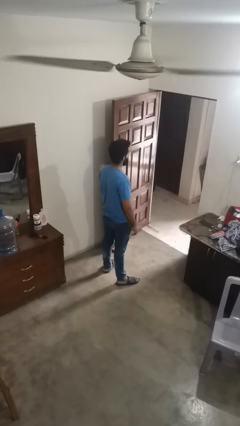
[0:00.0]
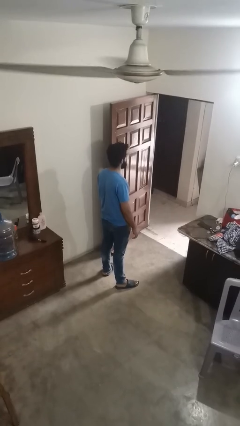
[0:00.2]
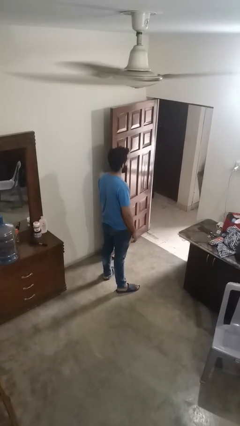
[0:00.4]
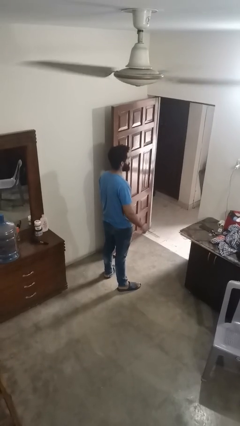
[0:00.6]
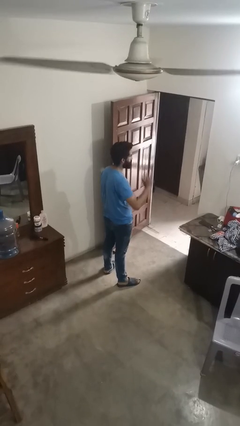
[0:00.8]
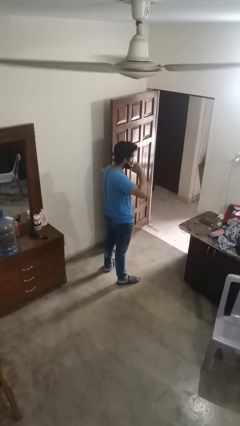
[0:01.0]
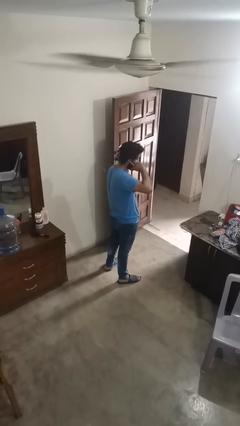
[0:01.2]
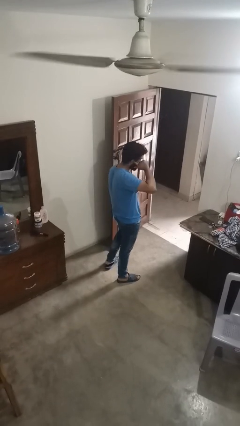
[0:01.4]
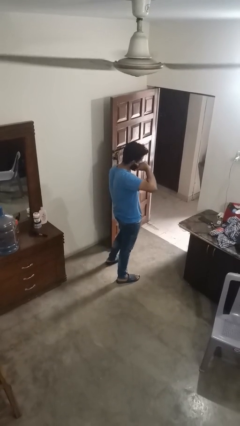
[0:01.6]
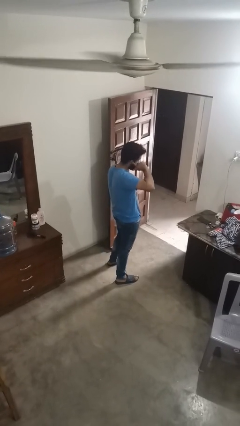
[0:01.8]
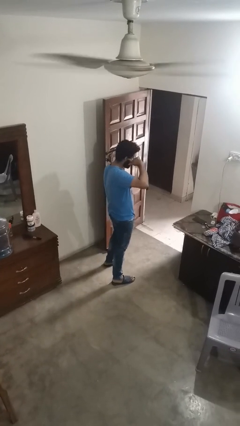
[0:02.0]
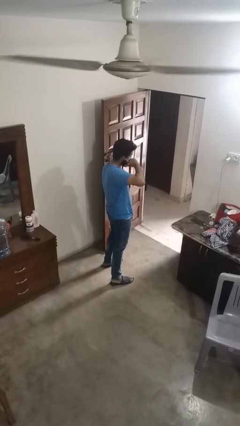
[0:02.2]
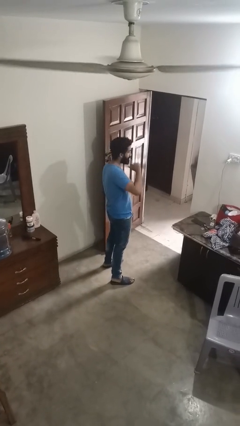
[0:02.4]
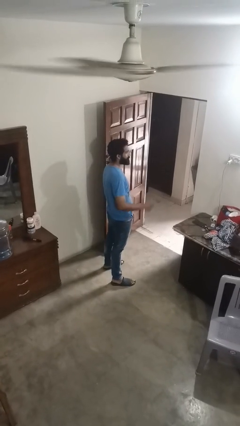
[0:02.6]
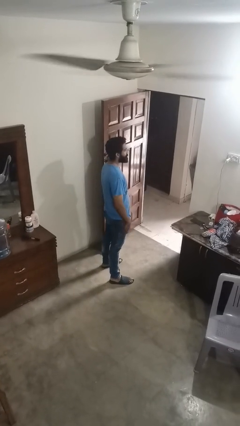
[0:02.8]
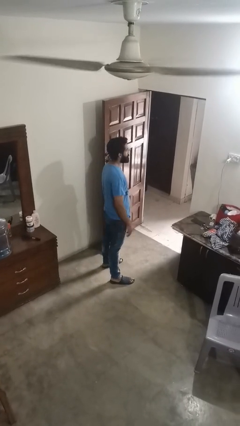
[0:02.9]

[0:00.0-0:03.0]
person touches earlobe

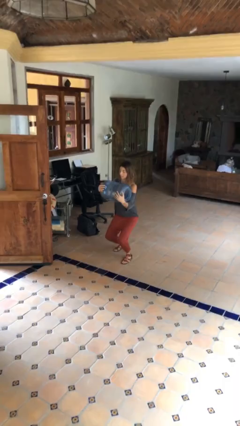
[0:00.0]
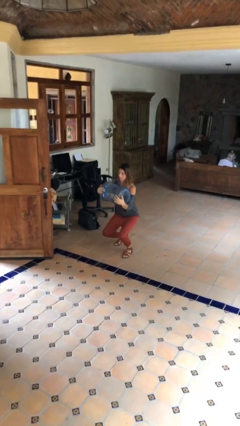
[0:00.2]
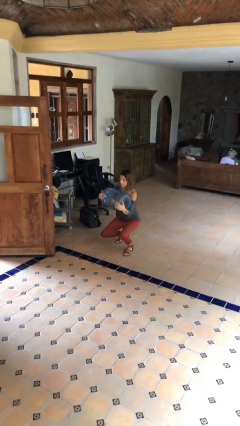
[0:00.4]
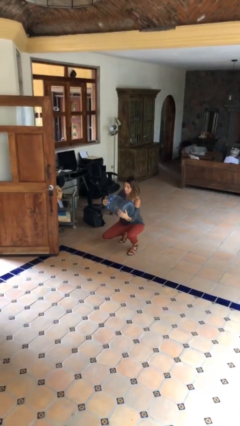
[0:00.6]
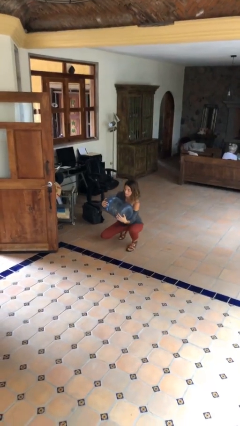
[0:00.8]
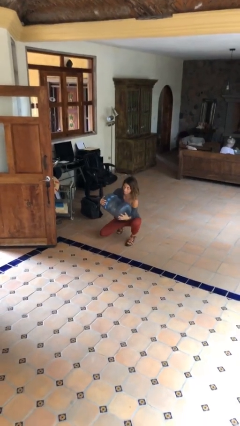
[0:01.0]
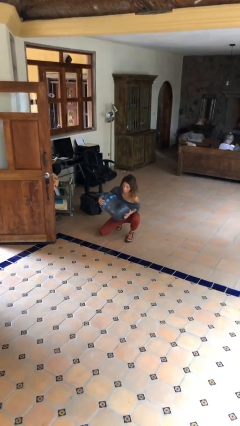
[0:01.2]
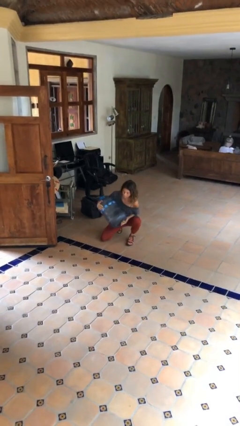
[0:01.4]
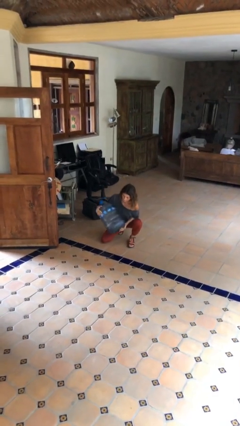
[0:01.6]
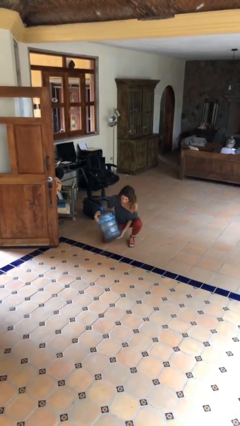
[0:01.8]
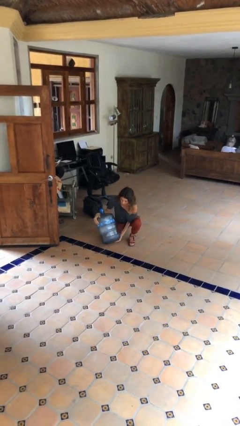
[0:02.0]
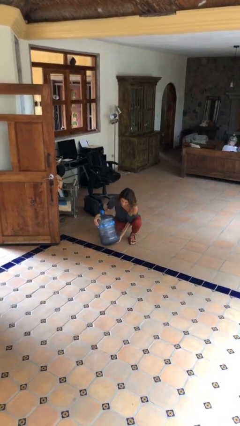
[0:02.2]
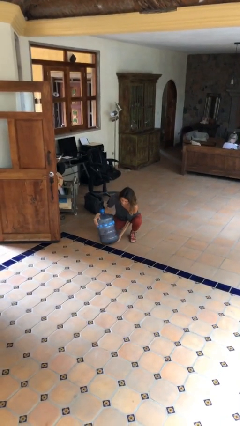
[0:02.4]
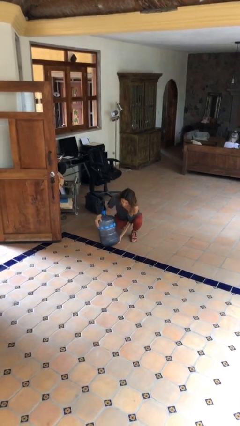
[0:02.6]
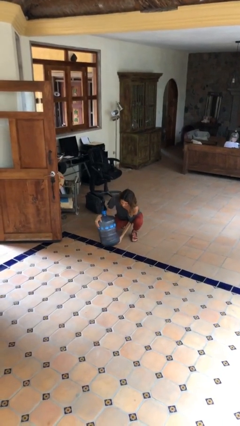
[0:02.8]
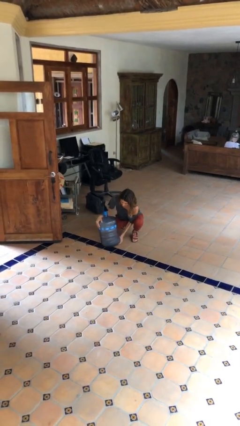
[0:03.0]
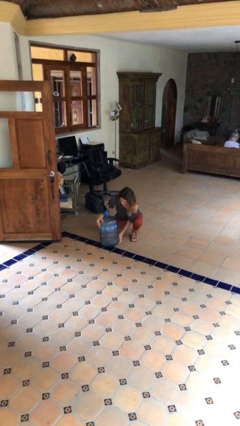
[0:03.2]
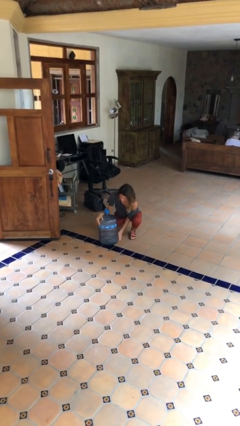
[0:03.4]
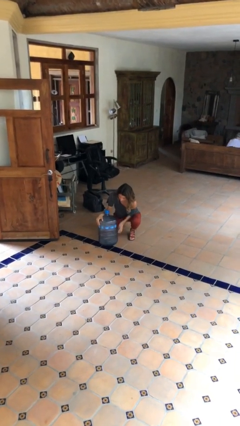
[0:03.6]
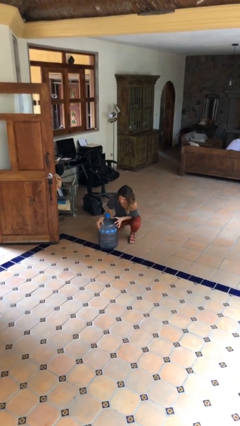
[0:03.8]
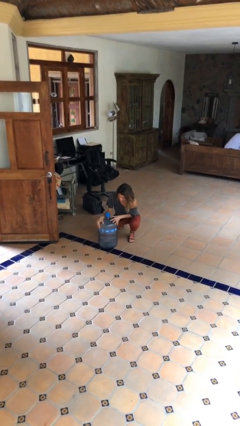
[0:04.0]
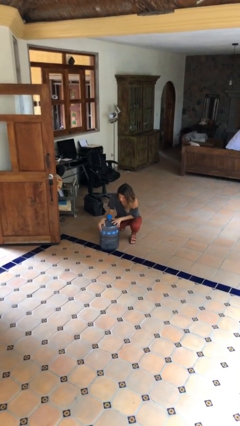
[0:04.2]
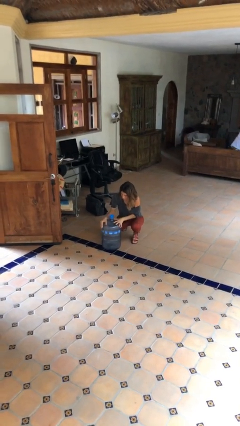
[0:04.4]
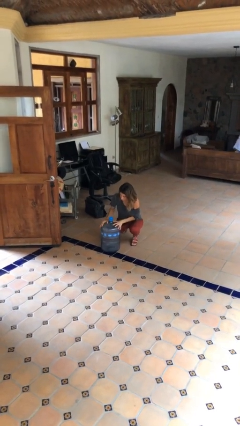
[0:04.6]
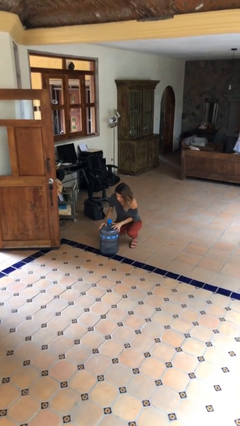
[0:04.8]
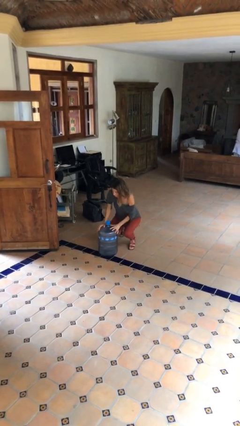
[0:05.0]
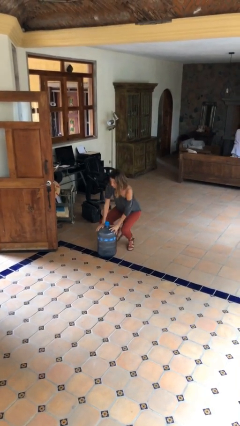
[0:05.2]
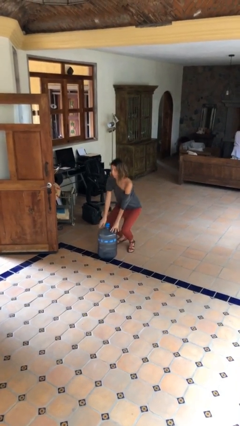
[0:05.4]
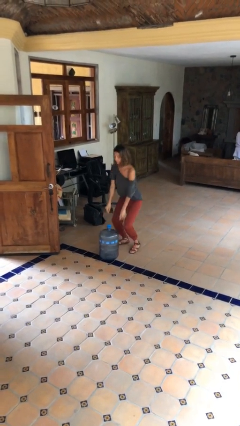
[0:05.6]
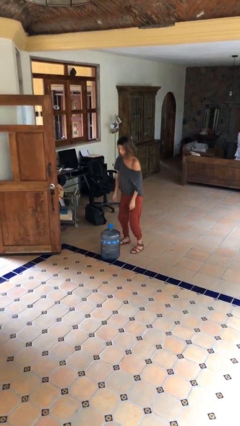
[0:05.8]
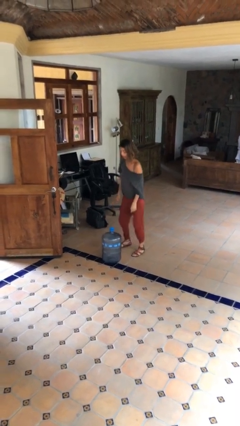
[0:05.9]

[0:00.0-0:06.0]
person puts down object on floor

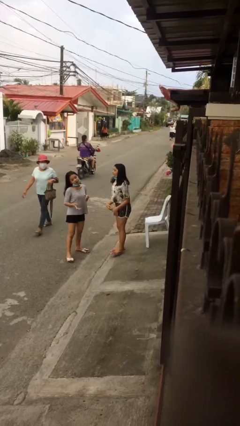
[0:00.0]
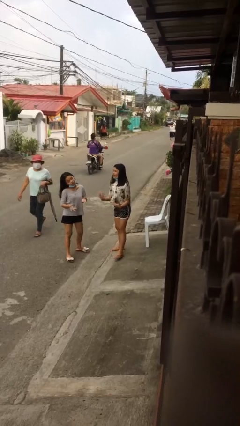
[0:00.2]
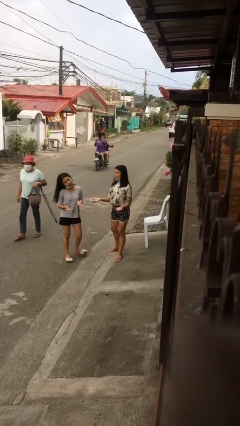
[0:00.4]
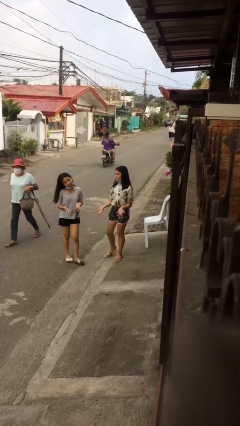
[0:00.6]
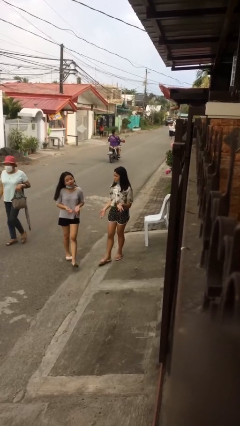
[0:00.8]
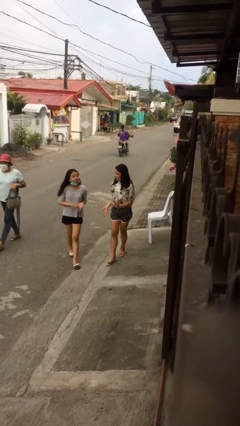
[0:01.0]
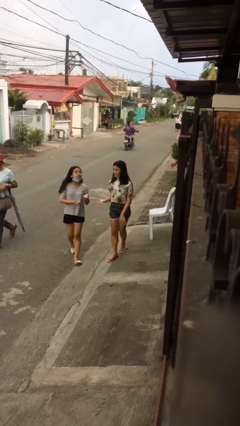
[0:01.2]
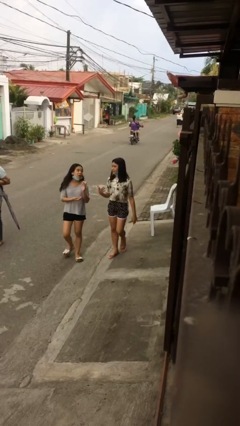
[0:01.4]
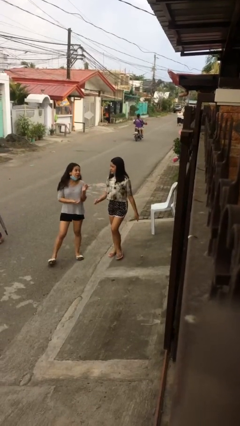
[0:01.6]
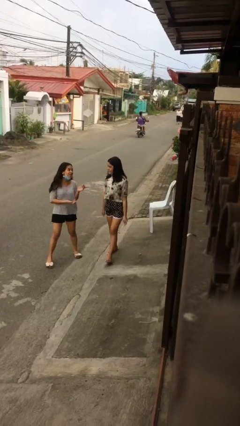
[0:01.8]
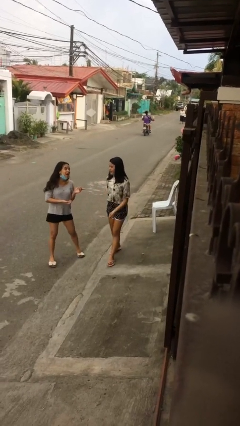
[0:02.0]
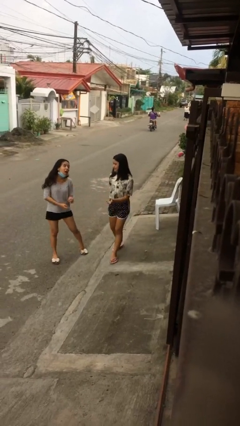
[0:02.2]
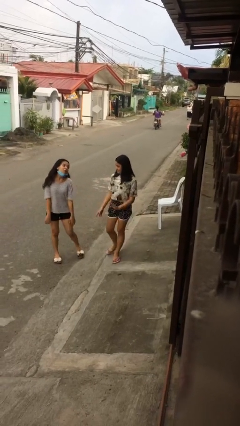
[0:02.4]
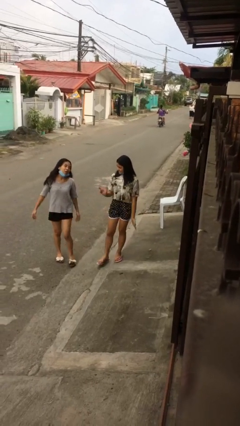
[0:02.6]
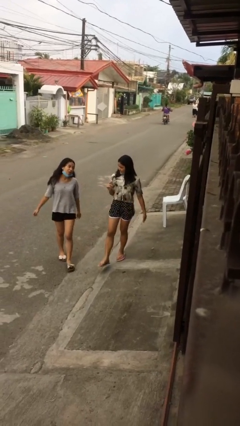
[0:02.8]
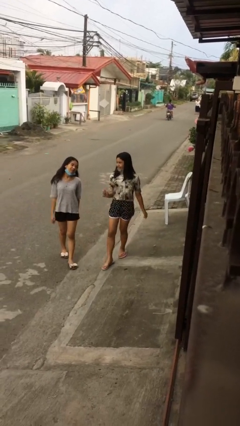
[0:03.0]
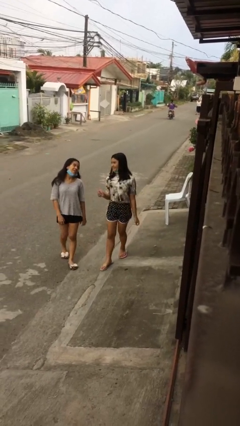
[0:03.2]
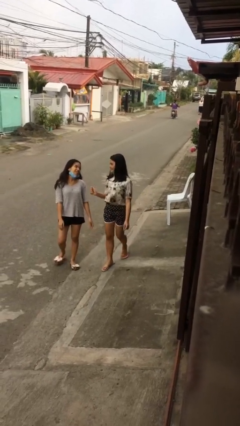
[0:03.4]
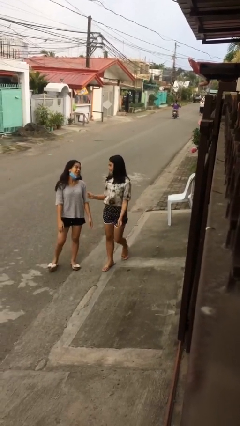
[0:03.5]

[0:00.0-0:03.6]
person talks to person

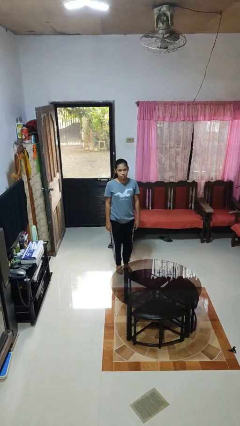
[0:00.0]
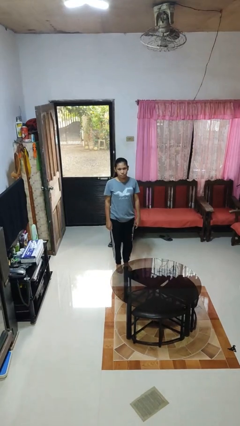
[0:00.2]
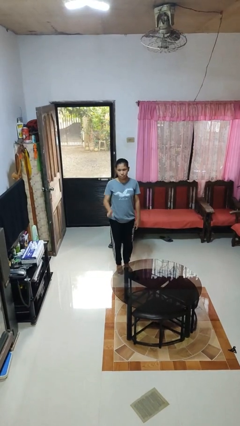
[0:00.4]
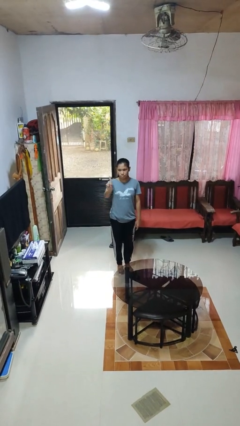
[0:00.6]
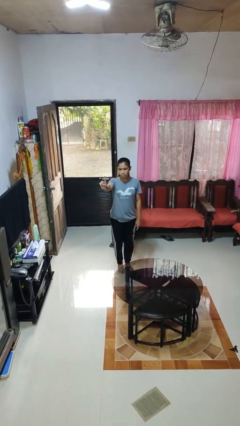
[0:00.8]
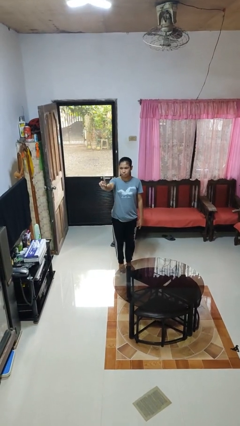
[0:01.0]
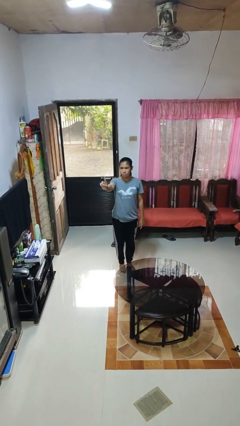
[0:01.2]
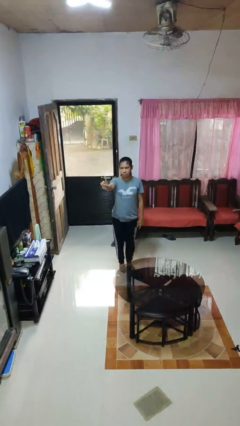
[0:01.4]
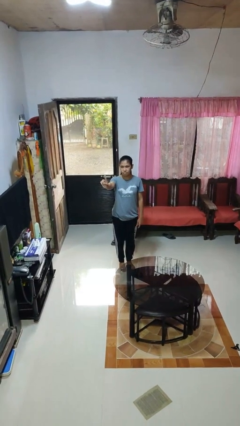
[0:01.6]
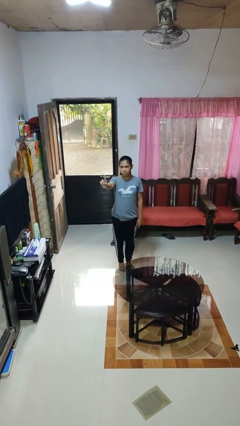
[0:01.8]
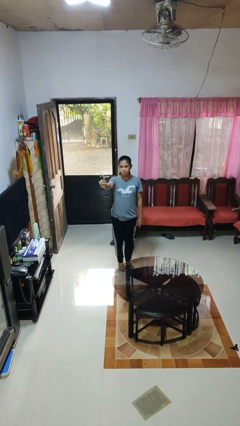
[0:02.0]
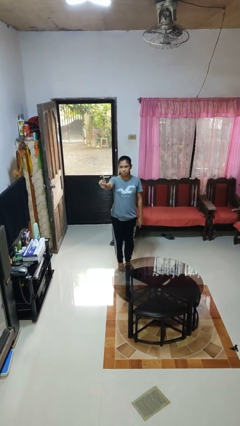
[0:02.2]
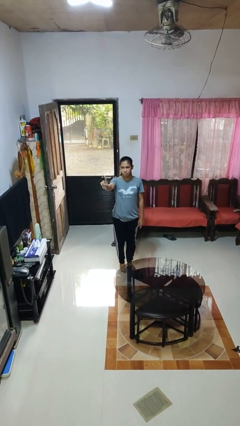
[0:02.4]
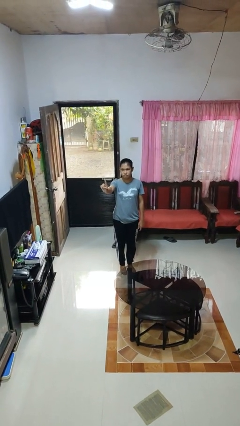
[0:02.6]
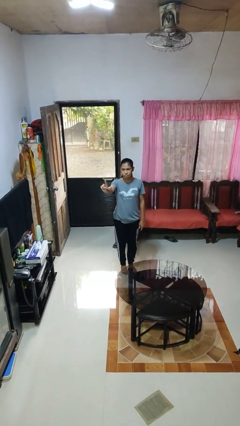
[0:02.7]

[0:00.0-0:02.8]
person gestures number one

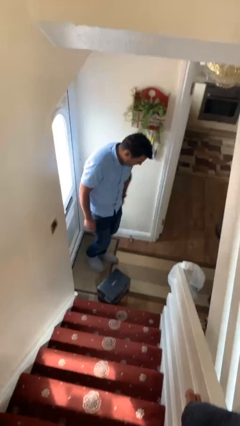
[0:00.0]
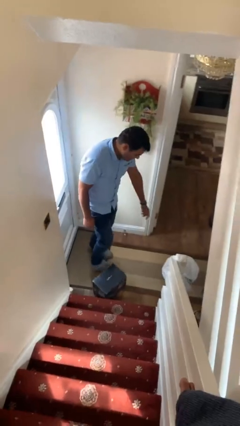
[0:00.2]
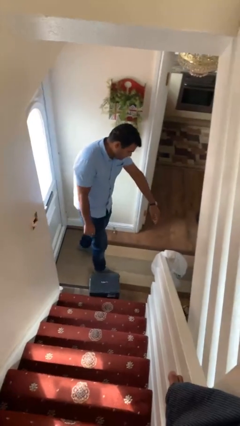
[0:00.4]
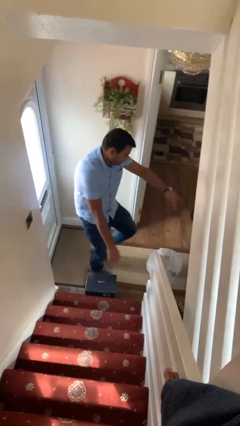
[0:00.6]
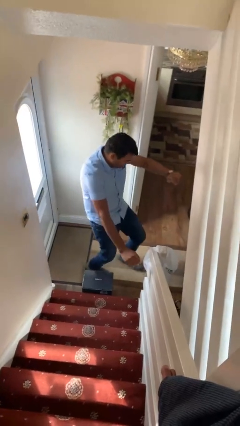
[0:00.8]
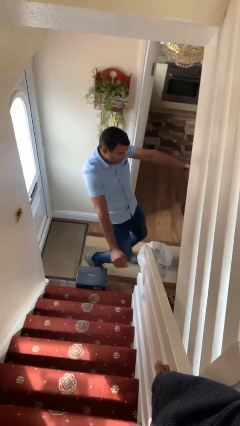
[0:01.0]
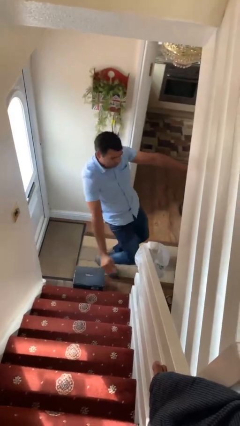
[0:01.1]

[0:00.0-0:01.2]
person trips on object on floor

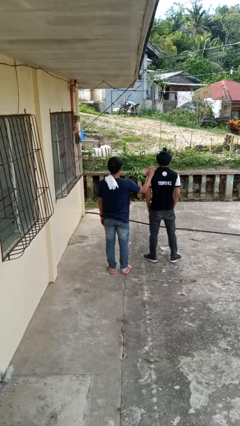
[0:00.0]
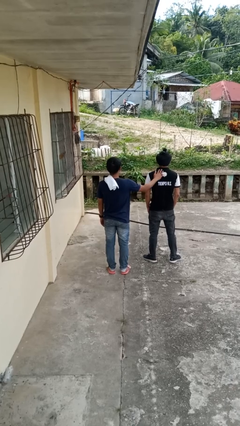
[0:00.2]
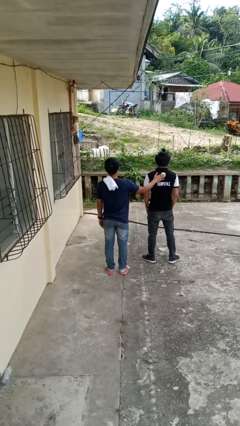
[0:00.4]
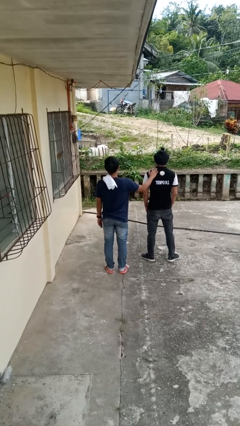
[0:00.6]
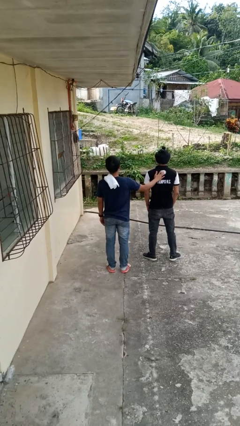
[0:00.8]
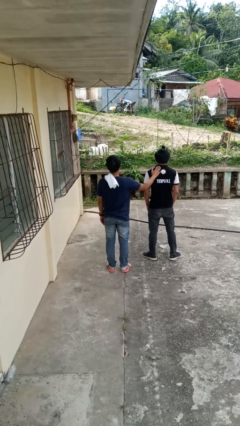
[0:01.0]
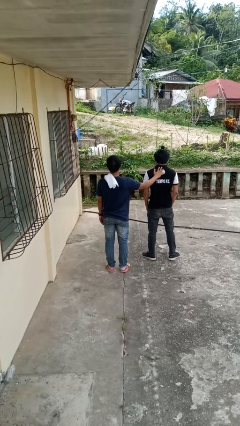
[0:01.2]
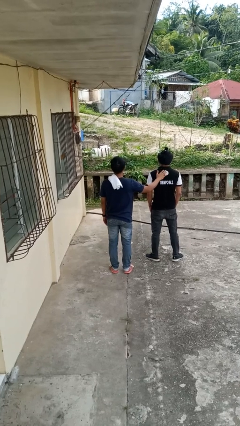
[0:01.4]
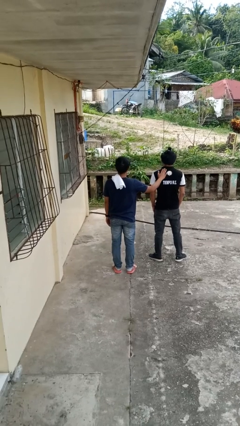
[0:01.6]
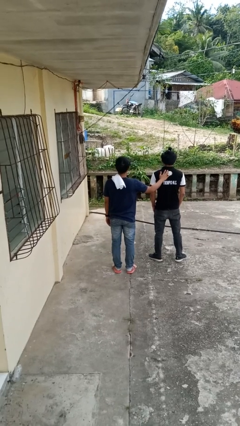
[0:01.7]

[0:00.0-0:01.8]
person touches back of person
